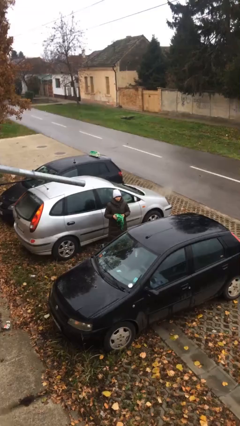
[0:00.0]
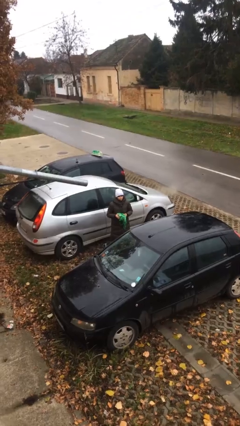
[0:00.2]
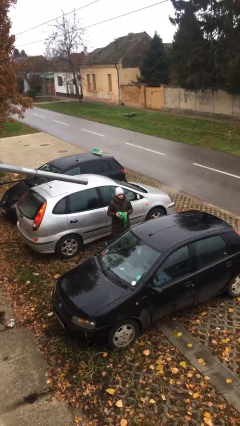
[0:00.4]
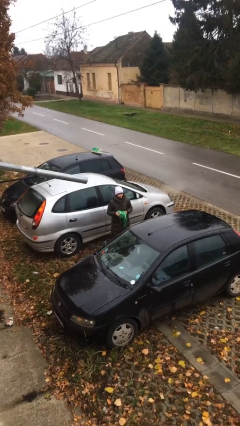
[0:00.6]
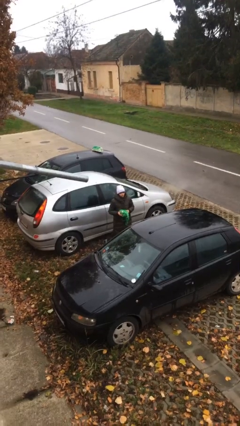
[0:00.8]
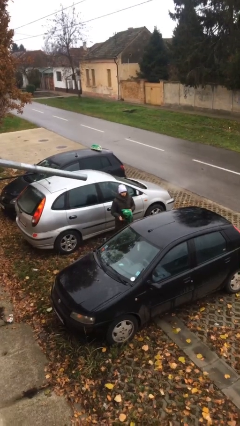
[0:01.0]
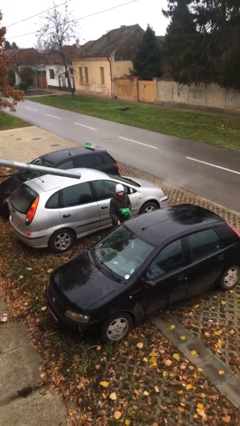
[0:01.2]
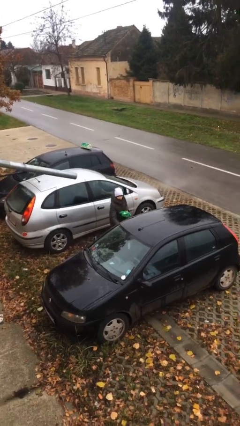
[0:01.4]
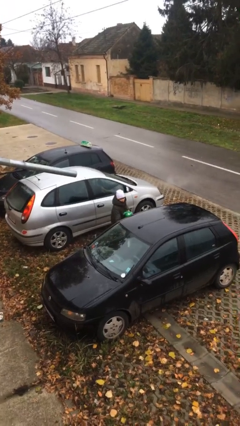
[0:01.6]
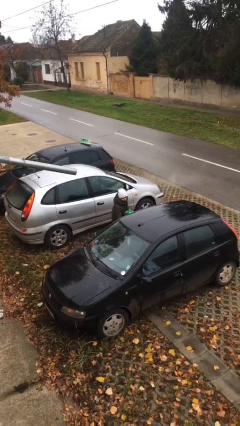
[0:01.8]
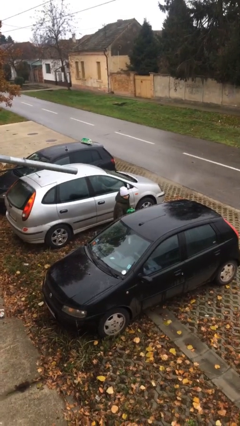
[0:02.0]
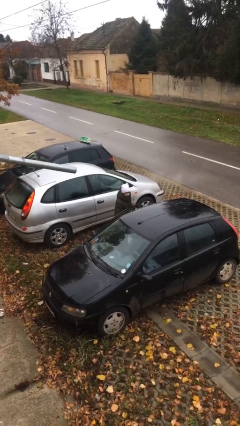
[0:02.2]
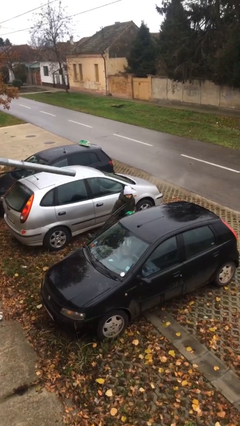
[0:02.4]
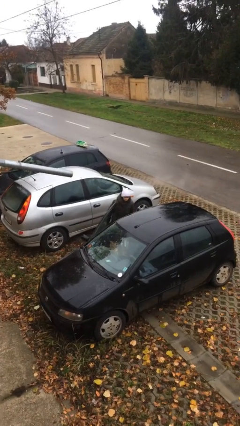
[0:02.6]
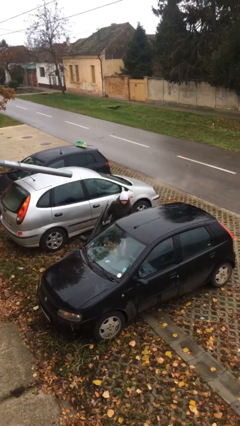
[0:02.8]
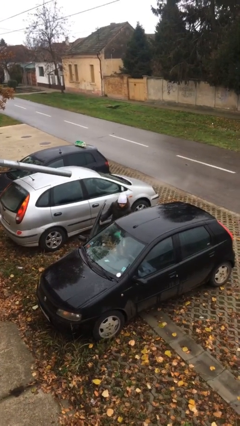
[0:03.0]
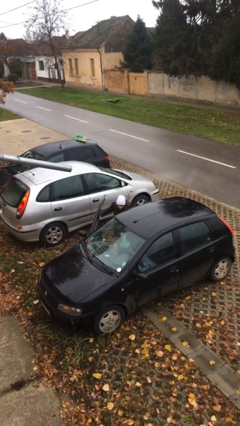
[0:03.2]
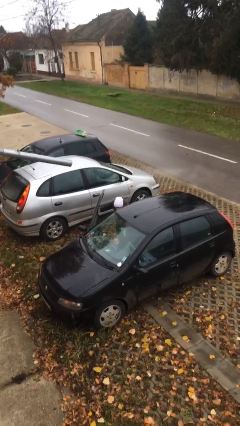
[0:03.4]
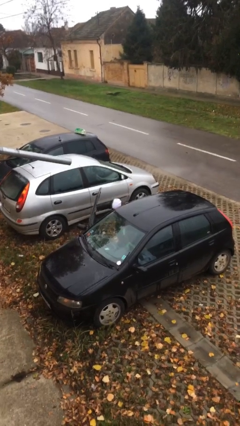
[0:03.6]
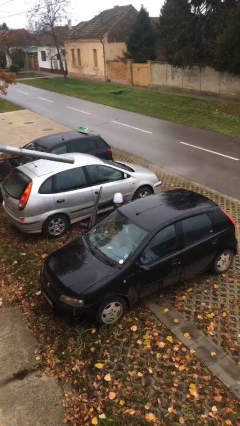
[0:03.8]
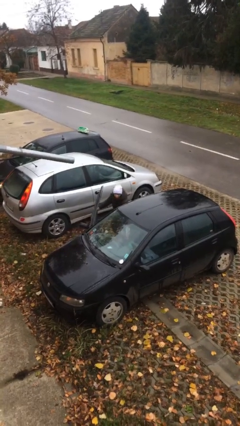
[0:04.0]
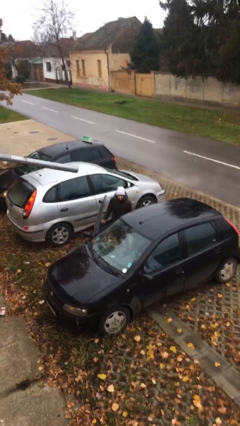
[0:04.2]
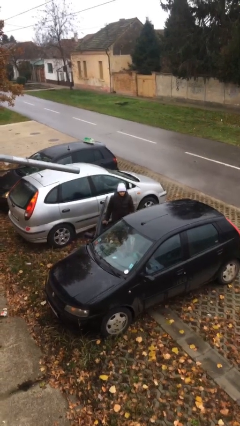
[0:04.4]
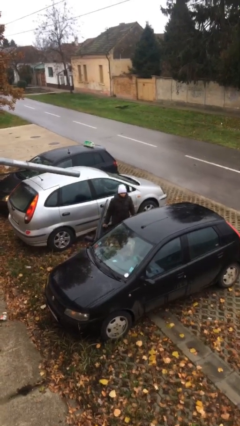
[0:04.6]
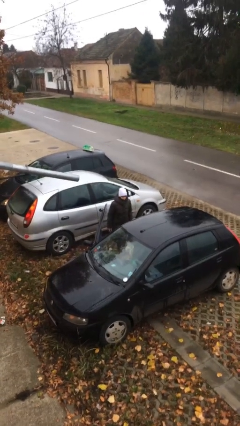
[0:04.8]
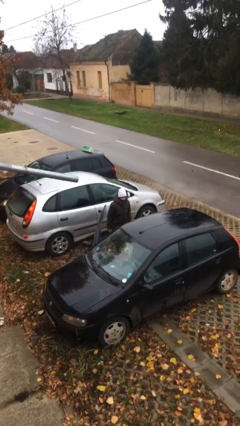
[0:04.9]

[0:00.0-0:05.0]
person loads car

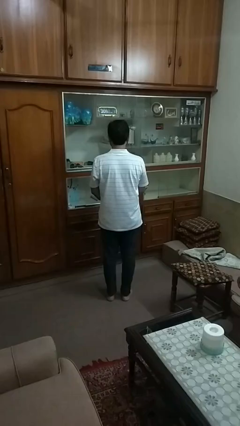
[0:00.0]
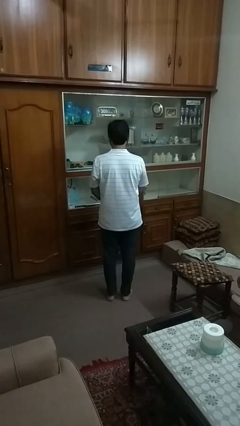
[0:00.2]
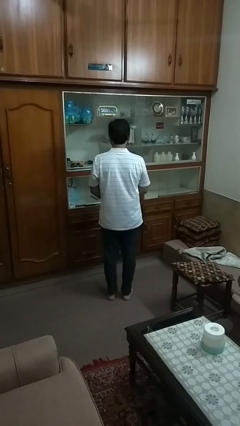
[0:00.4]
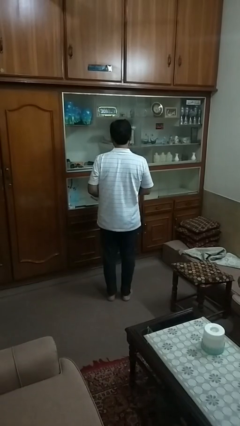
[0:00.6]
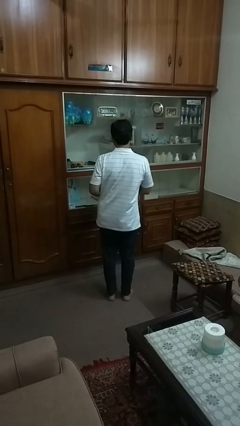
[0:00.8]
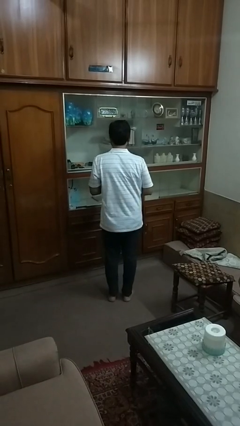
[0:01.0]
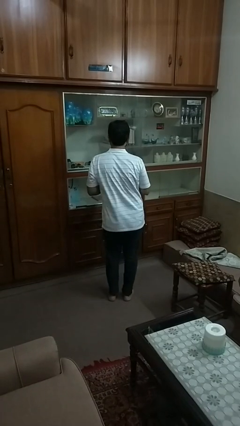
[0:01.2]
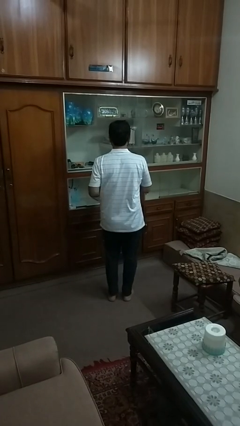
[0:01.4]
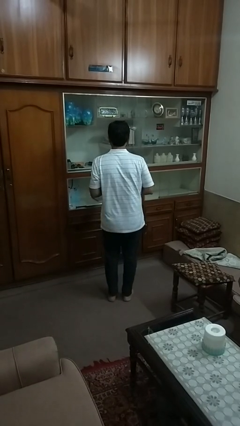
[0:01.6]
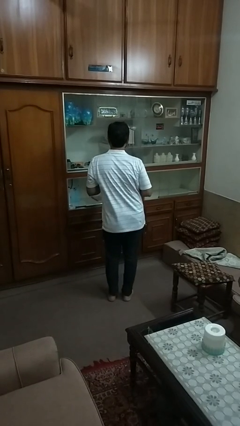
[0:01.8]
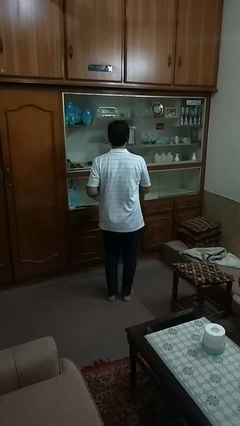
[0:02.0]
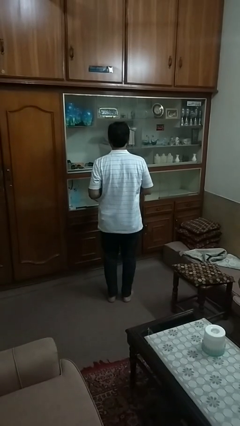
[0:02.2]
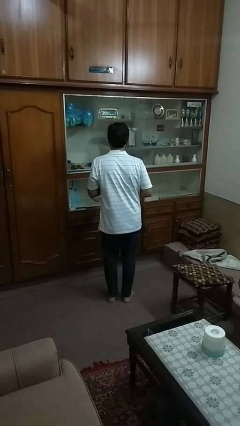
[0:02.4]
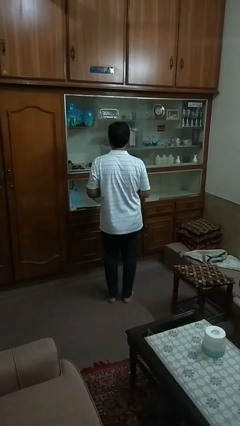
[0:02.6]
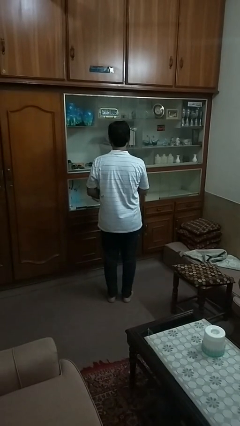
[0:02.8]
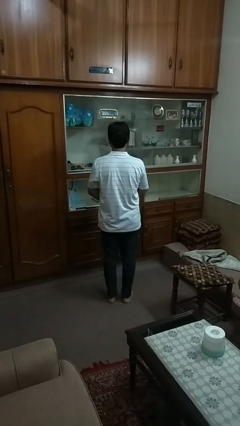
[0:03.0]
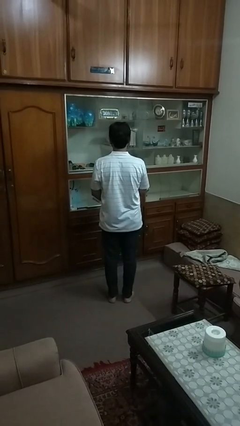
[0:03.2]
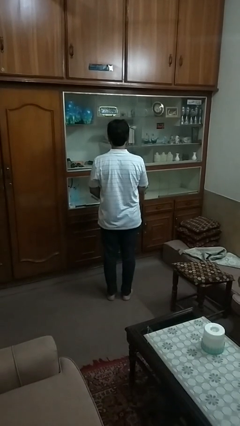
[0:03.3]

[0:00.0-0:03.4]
person dances in place

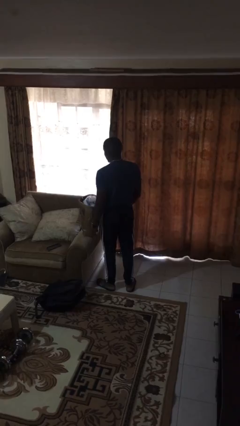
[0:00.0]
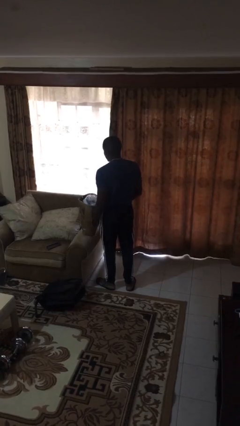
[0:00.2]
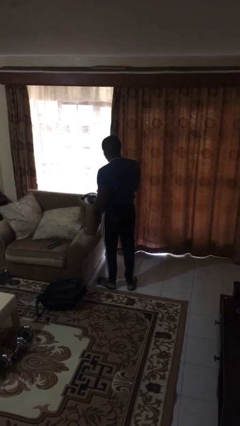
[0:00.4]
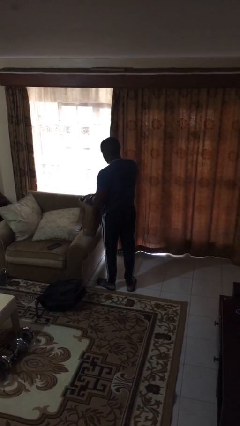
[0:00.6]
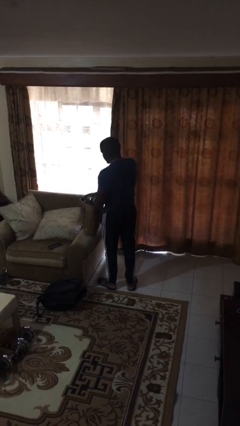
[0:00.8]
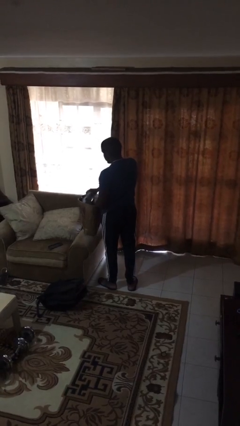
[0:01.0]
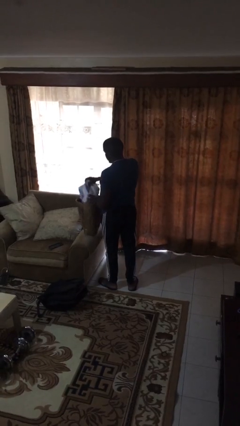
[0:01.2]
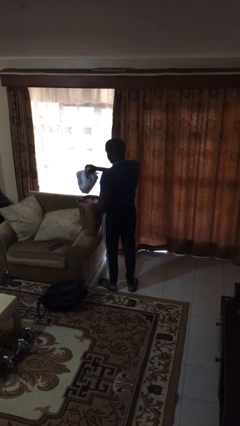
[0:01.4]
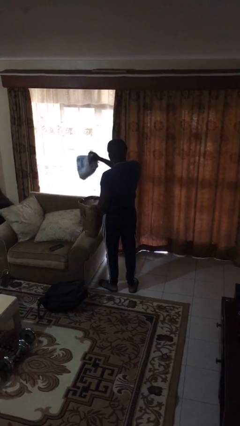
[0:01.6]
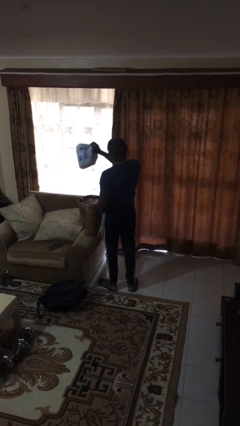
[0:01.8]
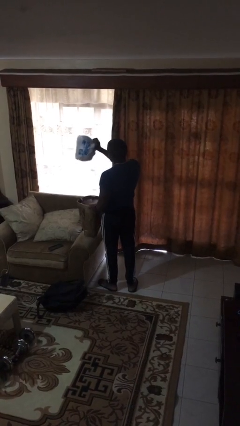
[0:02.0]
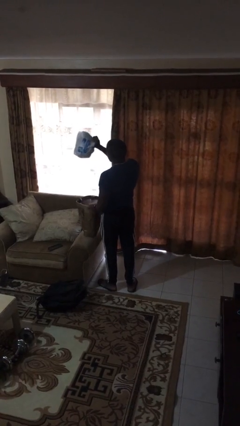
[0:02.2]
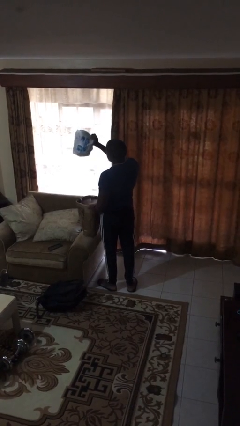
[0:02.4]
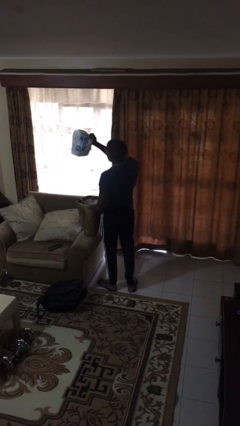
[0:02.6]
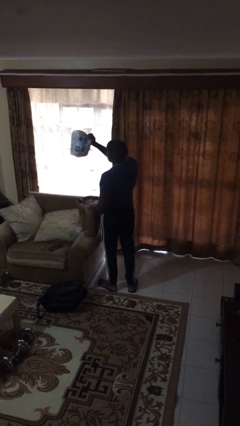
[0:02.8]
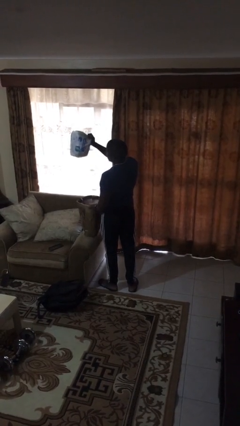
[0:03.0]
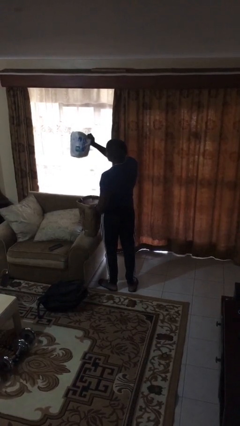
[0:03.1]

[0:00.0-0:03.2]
person takes object from bag

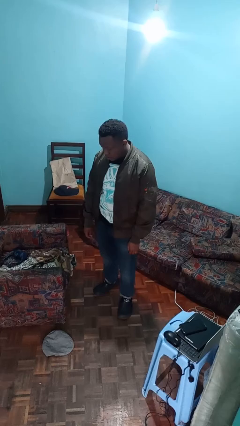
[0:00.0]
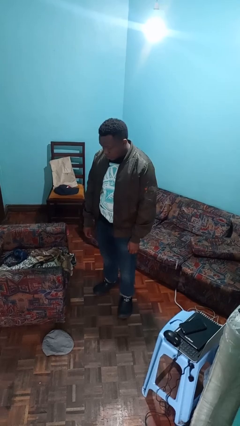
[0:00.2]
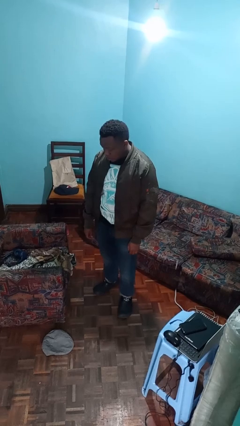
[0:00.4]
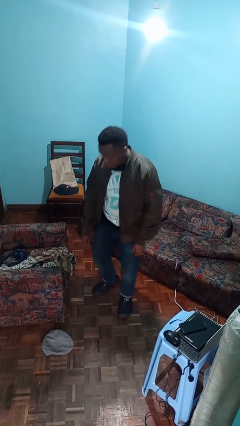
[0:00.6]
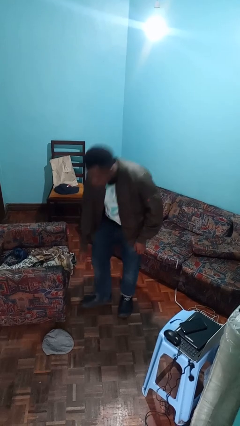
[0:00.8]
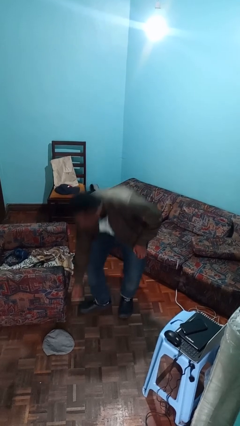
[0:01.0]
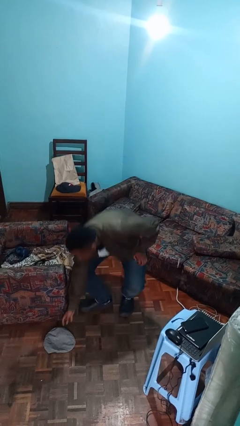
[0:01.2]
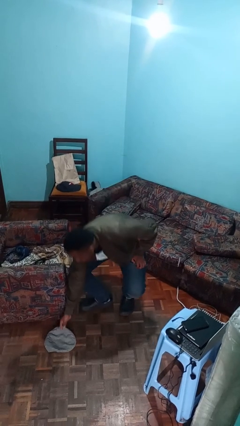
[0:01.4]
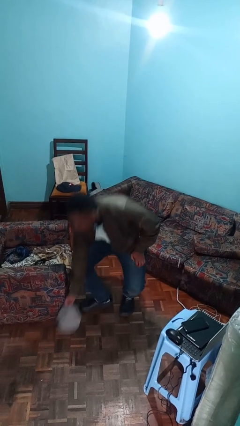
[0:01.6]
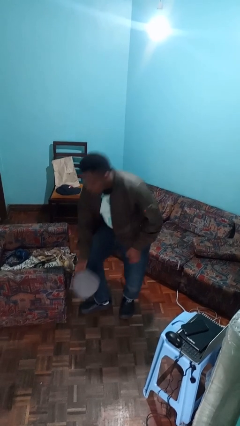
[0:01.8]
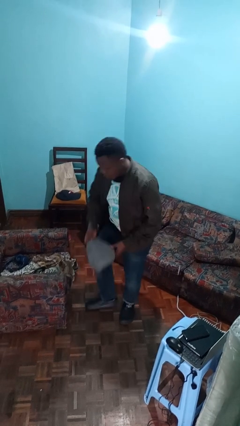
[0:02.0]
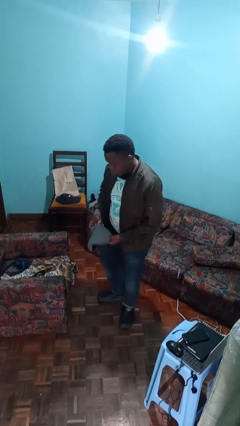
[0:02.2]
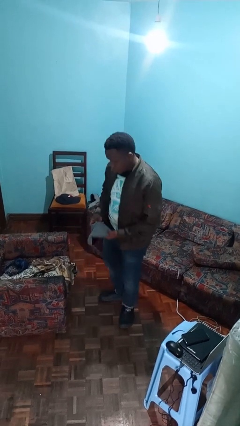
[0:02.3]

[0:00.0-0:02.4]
person picks up object from floor

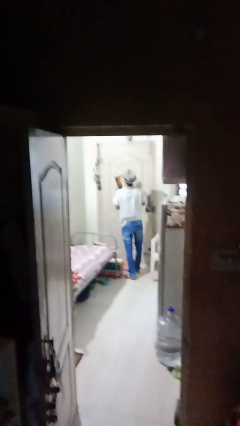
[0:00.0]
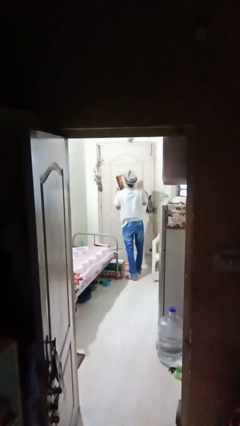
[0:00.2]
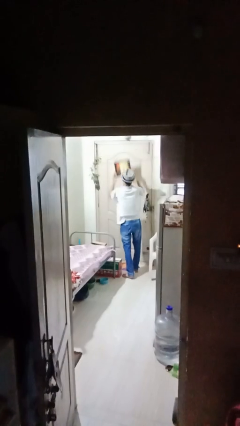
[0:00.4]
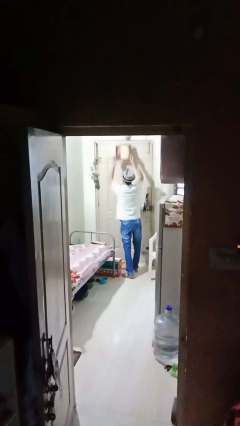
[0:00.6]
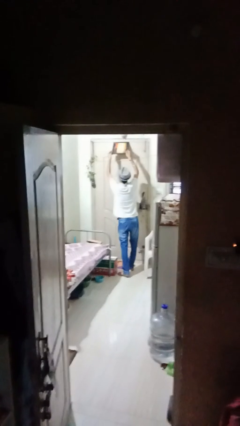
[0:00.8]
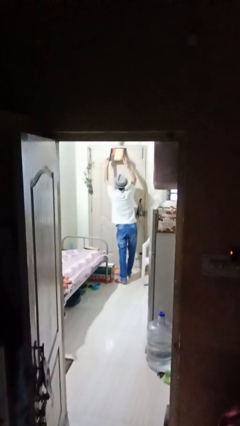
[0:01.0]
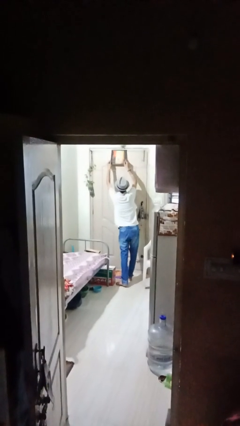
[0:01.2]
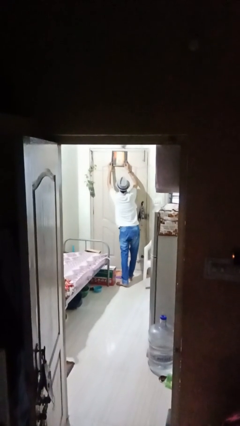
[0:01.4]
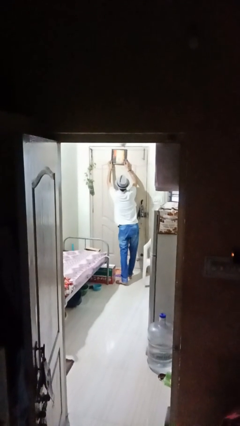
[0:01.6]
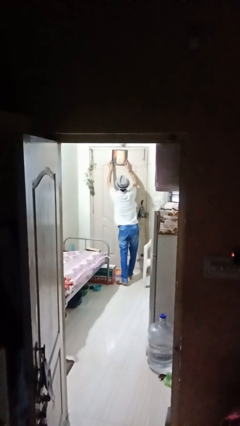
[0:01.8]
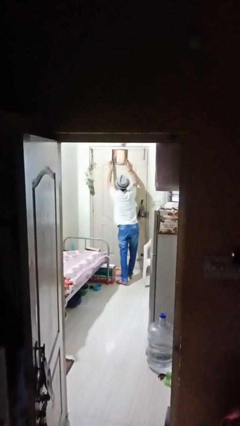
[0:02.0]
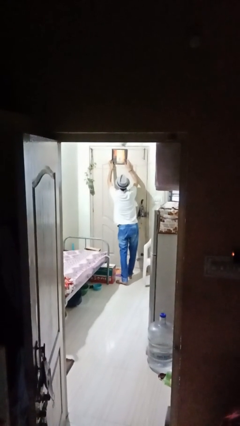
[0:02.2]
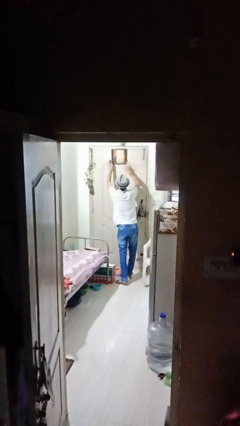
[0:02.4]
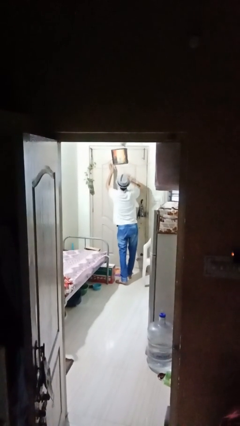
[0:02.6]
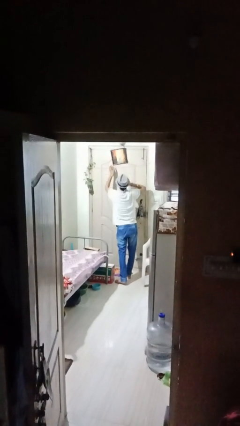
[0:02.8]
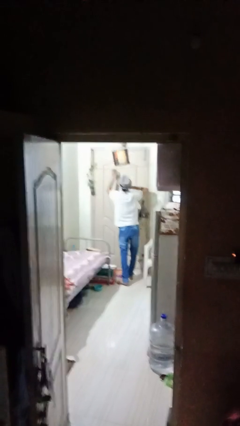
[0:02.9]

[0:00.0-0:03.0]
person puts up picture frame

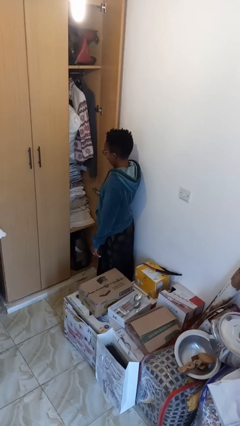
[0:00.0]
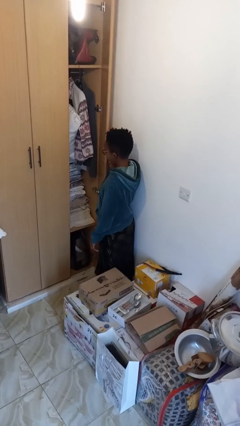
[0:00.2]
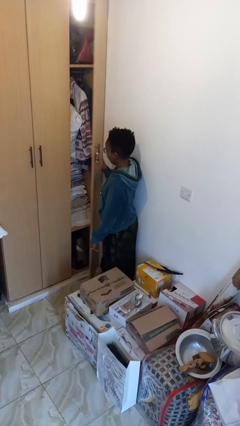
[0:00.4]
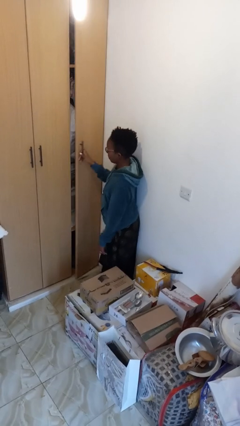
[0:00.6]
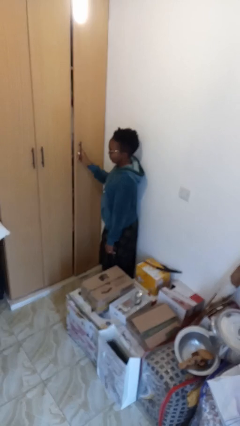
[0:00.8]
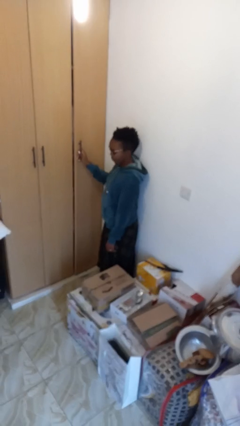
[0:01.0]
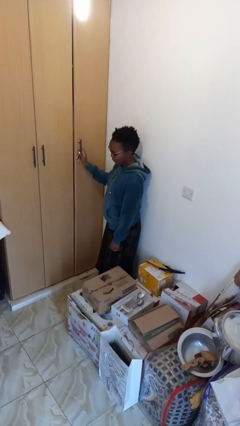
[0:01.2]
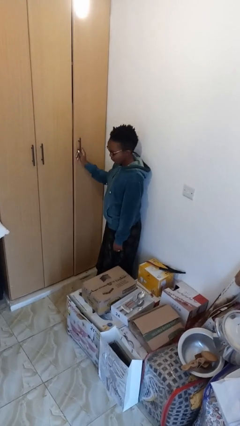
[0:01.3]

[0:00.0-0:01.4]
person closes closet door
